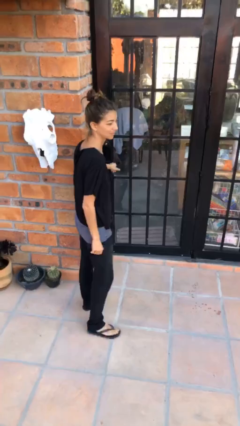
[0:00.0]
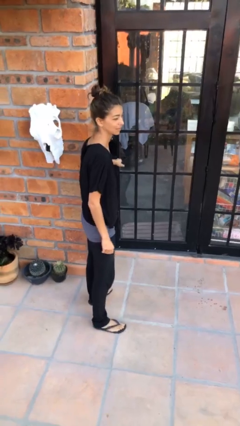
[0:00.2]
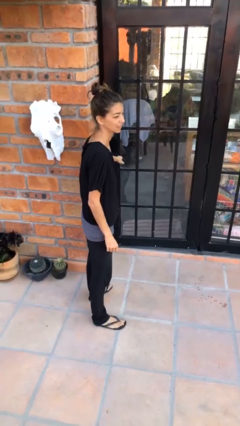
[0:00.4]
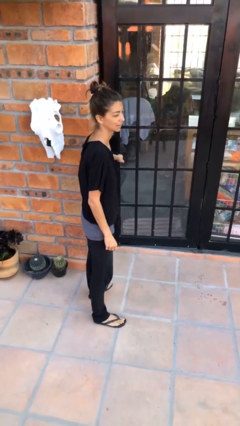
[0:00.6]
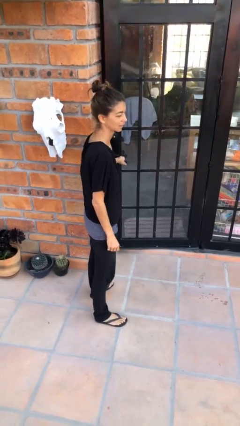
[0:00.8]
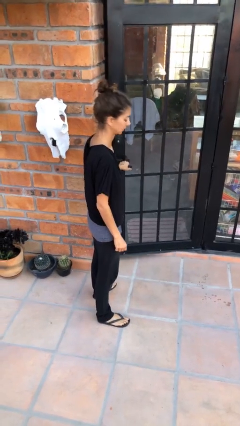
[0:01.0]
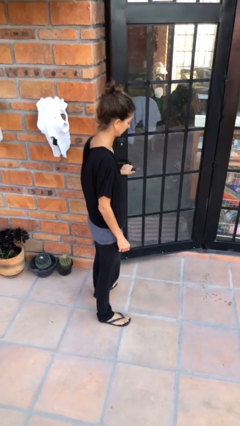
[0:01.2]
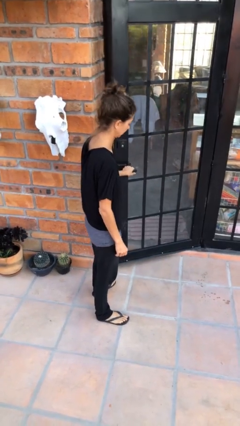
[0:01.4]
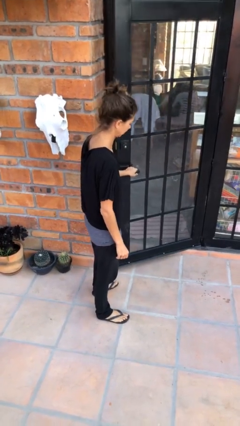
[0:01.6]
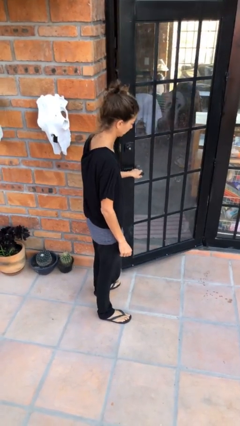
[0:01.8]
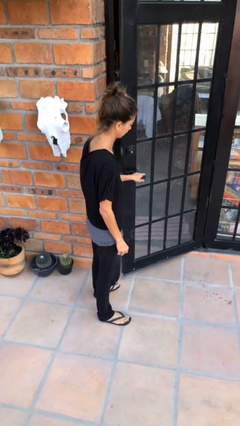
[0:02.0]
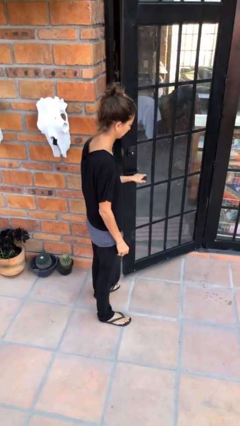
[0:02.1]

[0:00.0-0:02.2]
person opens facility door

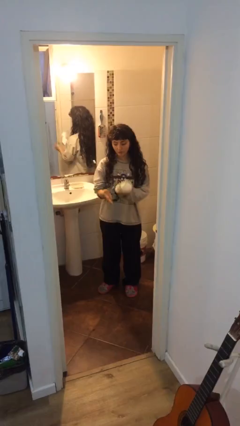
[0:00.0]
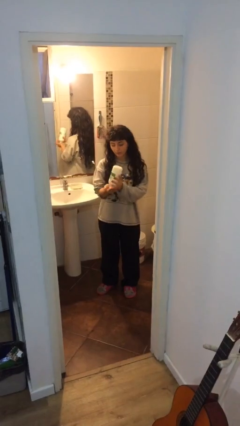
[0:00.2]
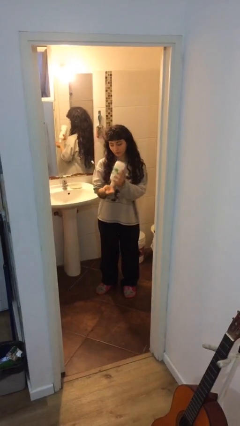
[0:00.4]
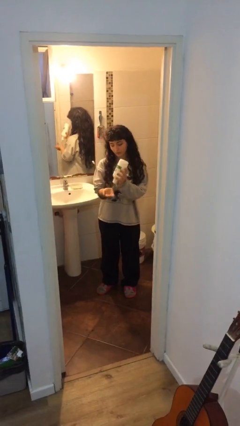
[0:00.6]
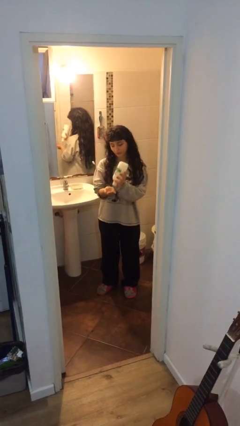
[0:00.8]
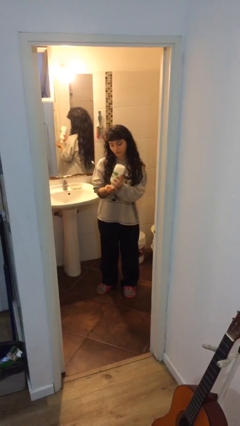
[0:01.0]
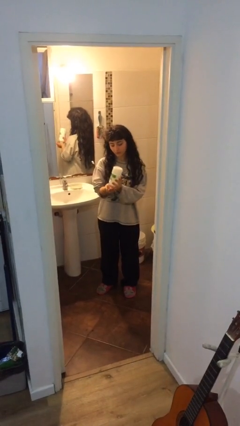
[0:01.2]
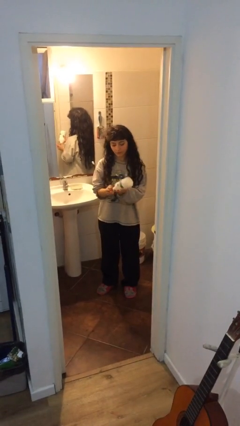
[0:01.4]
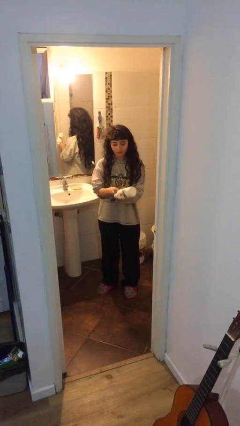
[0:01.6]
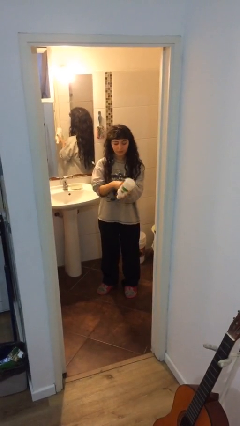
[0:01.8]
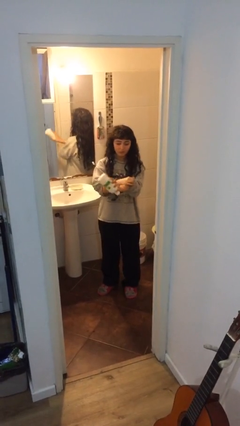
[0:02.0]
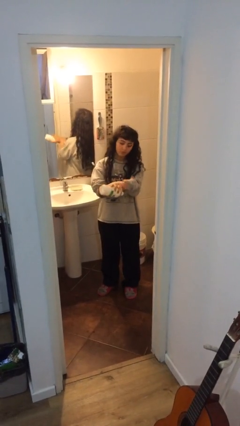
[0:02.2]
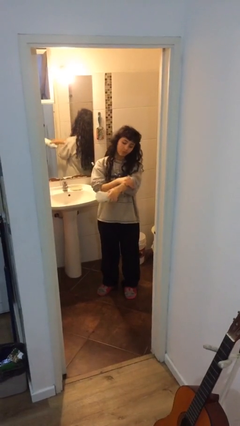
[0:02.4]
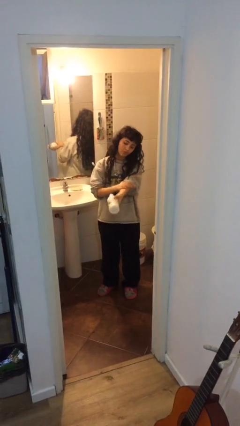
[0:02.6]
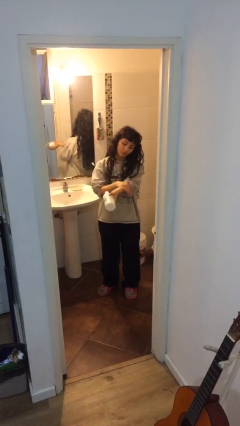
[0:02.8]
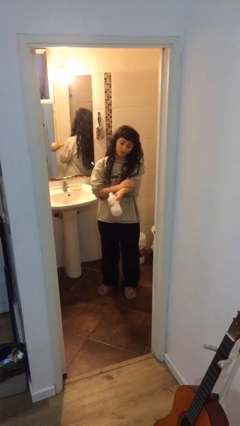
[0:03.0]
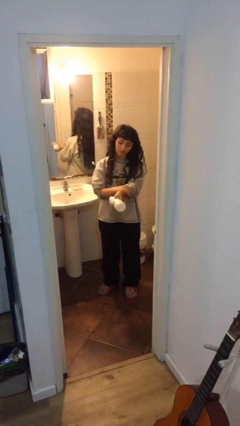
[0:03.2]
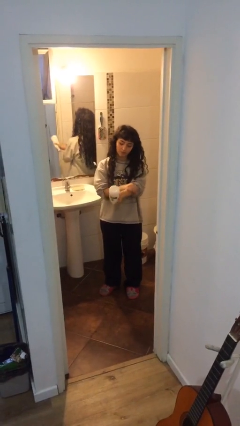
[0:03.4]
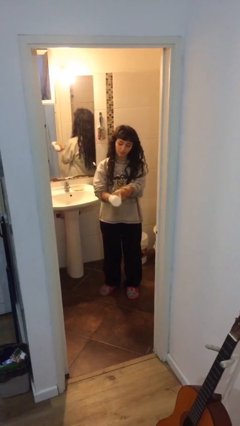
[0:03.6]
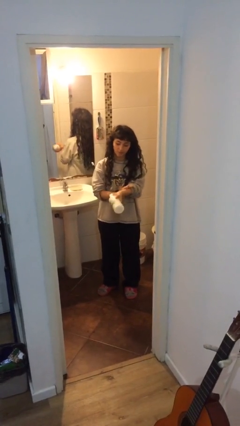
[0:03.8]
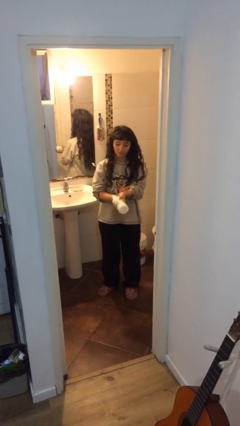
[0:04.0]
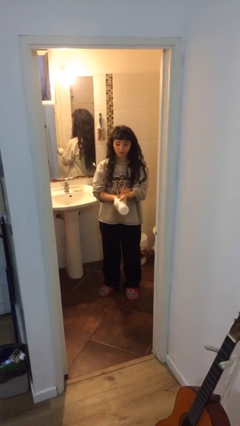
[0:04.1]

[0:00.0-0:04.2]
person applies sunscreen

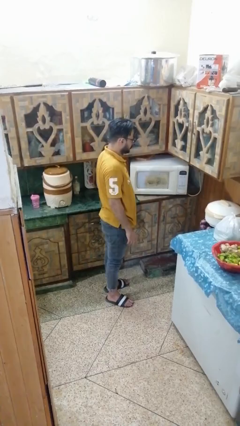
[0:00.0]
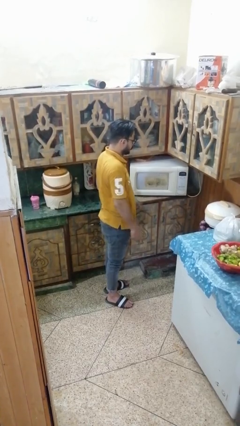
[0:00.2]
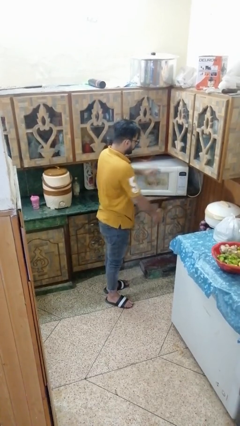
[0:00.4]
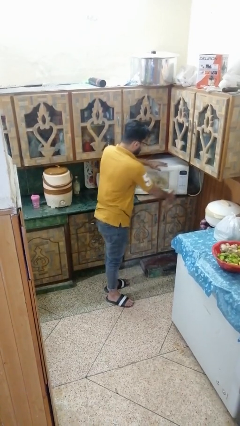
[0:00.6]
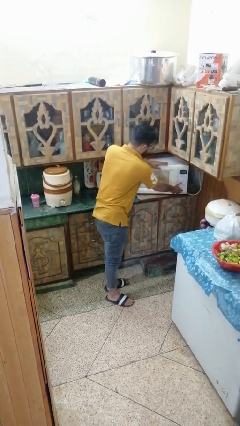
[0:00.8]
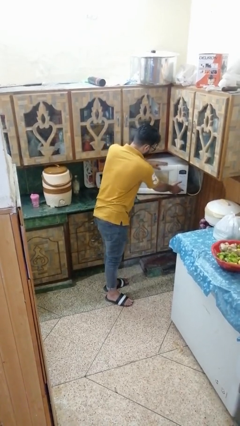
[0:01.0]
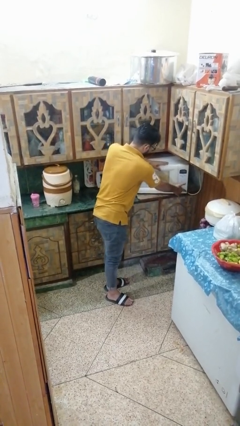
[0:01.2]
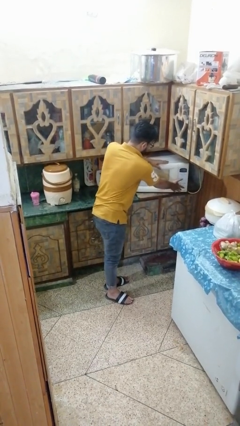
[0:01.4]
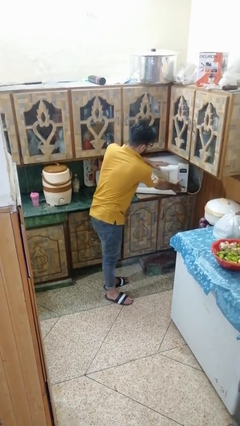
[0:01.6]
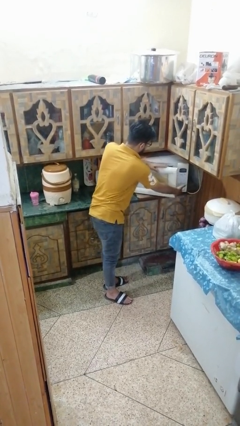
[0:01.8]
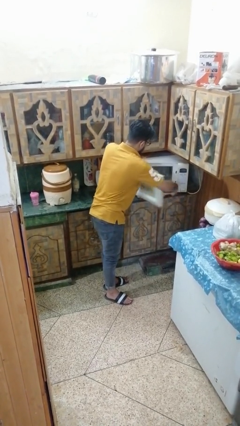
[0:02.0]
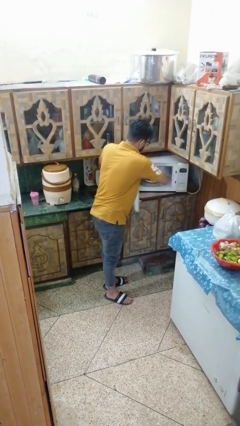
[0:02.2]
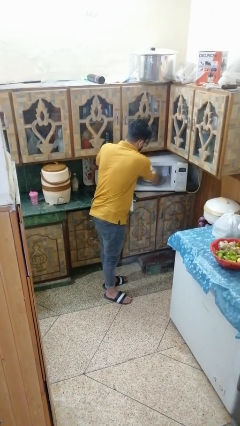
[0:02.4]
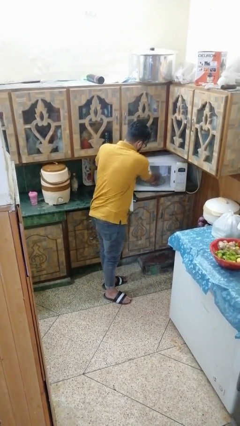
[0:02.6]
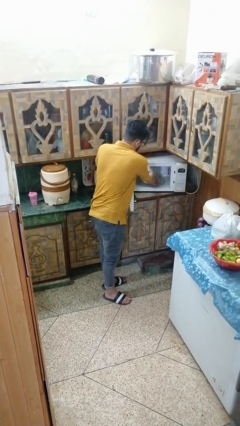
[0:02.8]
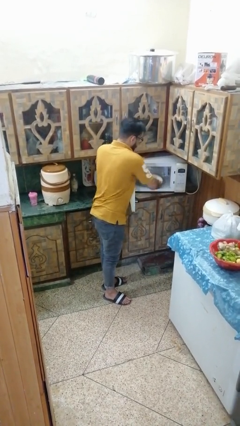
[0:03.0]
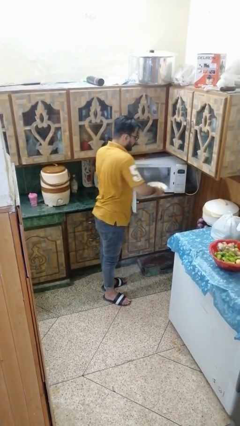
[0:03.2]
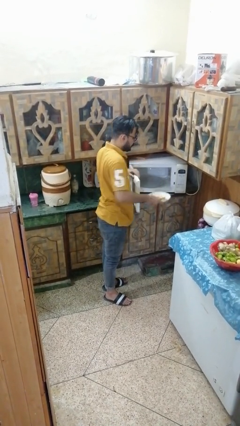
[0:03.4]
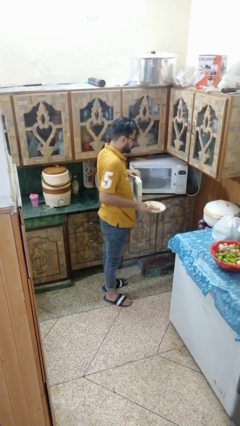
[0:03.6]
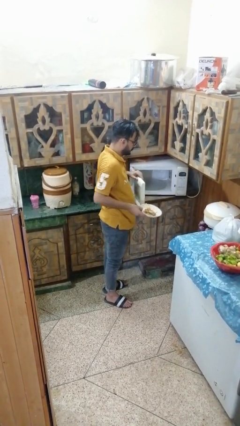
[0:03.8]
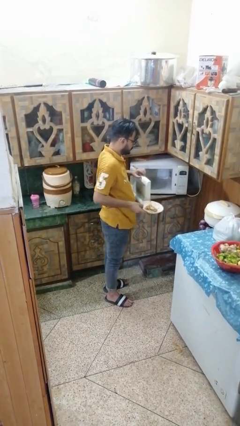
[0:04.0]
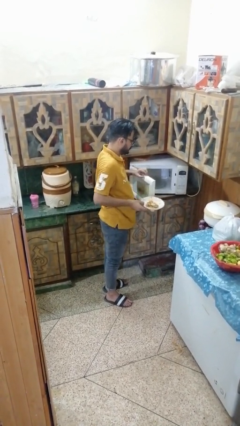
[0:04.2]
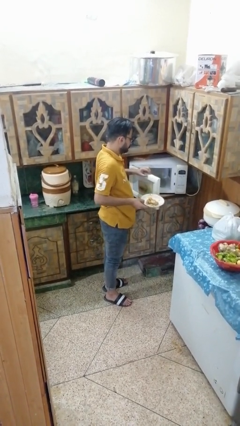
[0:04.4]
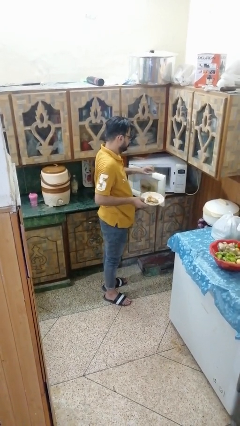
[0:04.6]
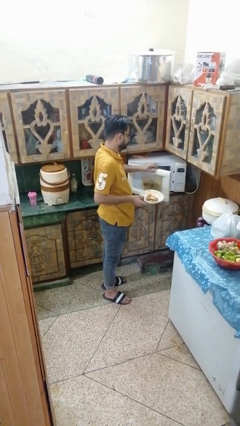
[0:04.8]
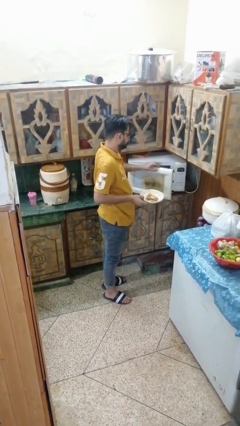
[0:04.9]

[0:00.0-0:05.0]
person takes object from microwave

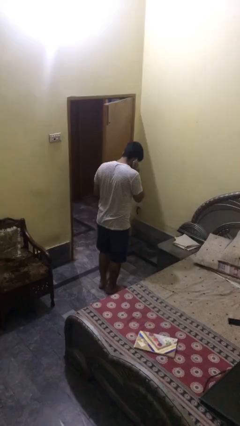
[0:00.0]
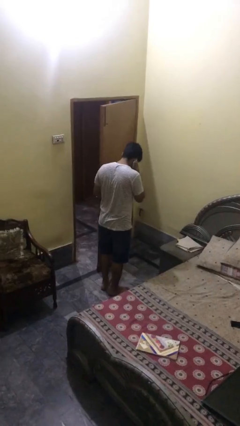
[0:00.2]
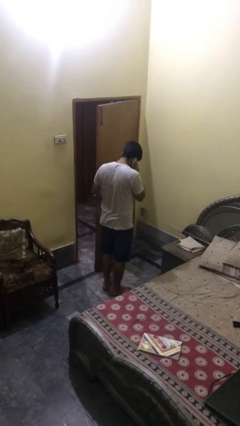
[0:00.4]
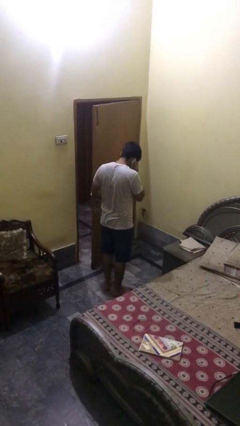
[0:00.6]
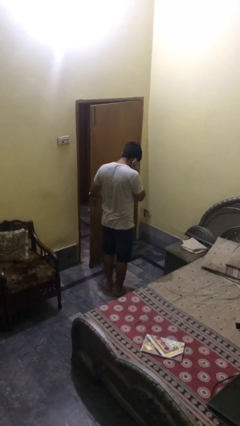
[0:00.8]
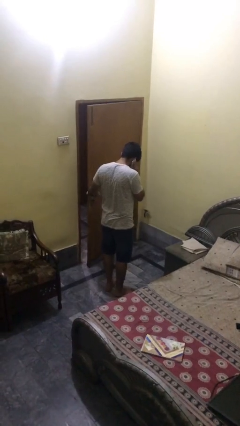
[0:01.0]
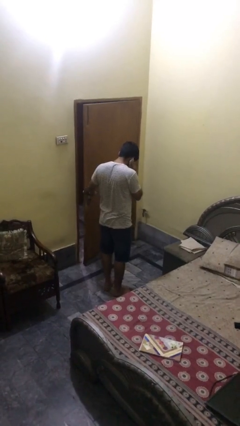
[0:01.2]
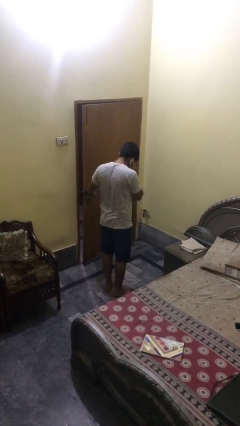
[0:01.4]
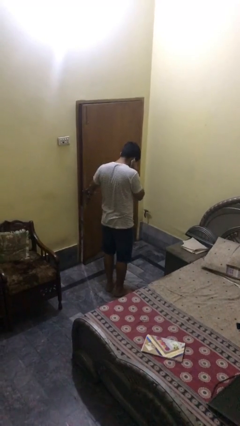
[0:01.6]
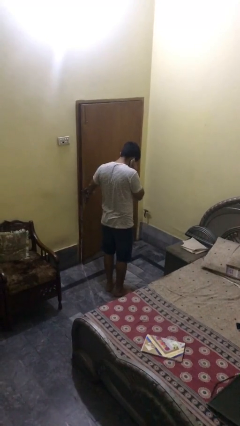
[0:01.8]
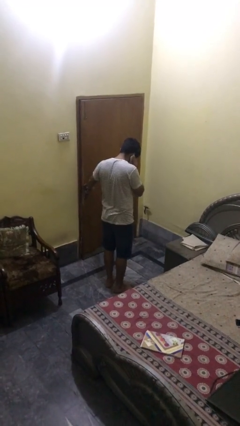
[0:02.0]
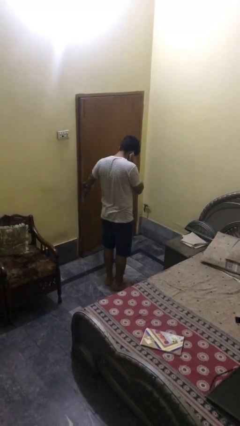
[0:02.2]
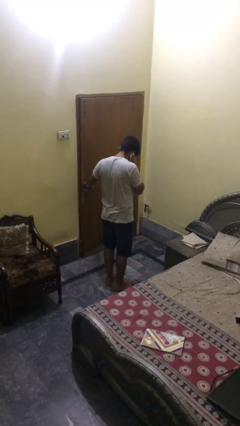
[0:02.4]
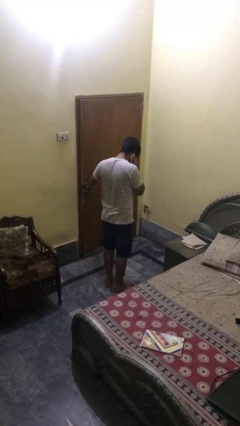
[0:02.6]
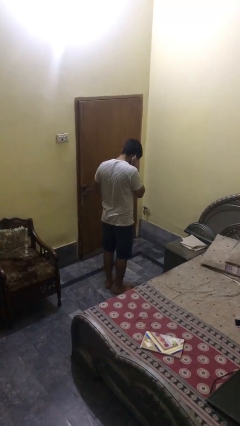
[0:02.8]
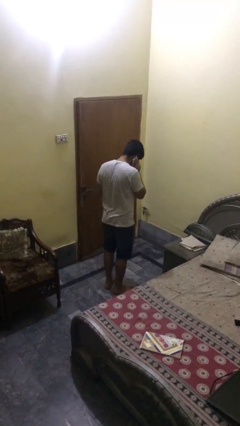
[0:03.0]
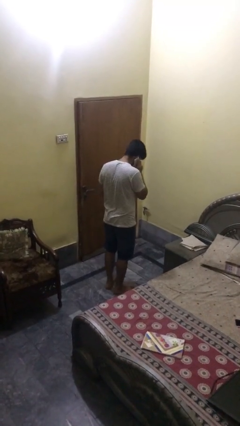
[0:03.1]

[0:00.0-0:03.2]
person closes facility door

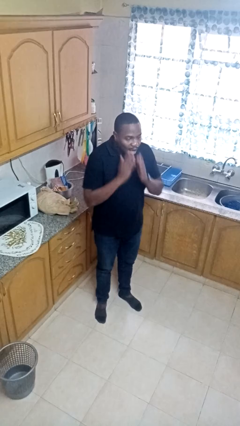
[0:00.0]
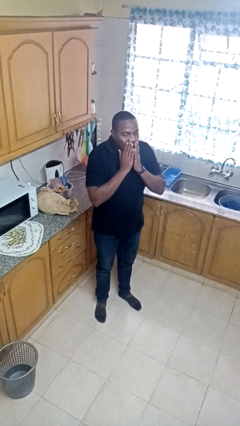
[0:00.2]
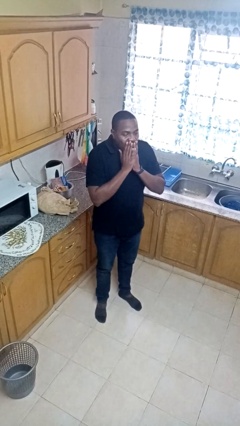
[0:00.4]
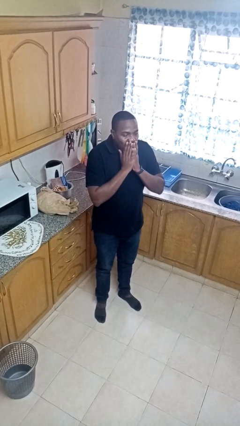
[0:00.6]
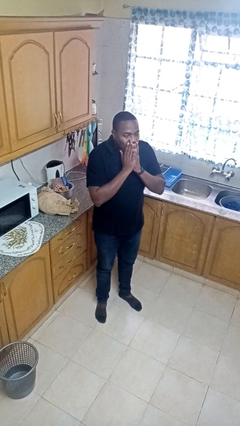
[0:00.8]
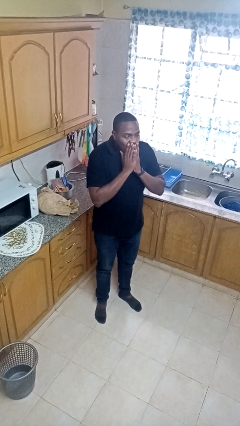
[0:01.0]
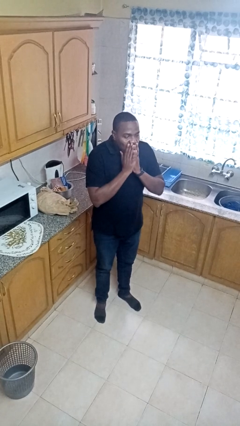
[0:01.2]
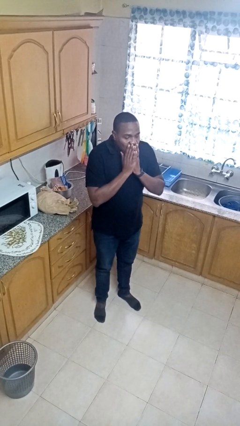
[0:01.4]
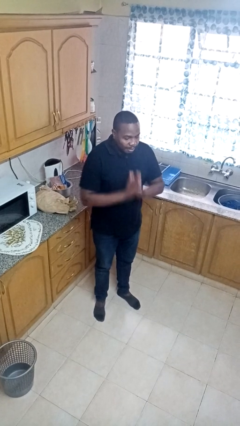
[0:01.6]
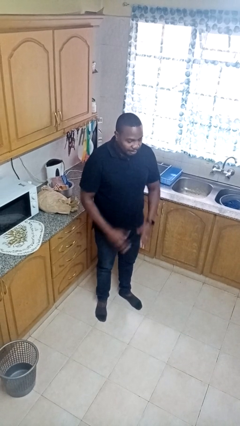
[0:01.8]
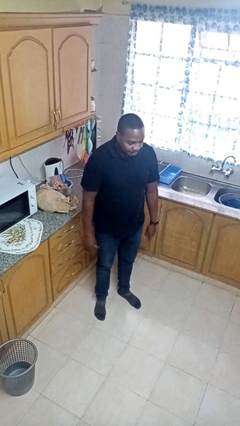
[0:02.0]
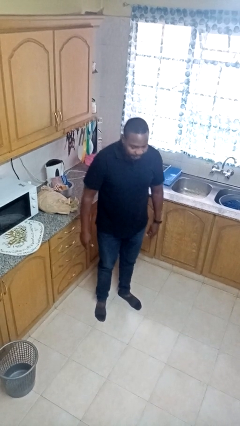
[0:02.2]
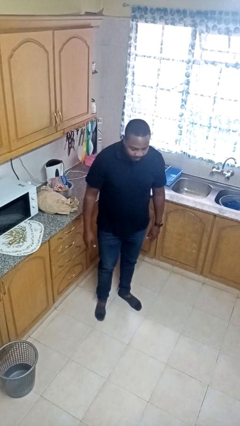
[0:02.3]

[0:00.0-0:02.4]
person yawns

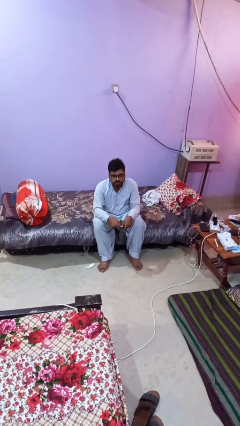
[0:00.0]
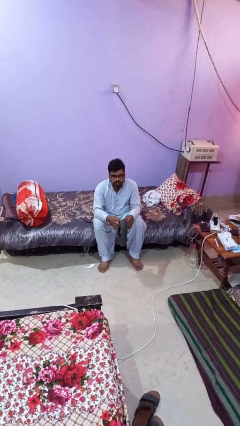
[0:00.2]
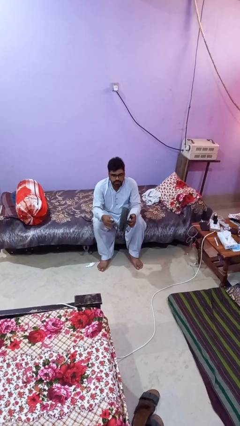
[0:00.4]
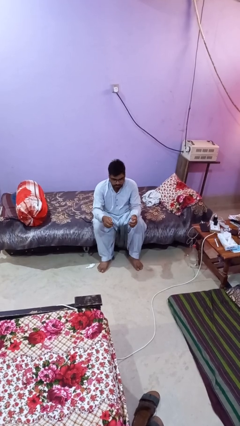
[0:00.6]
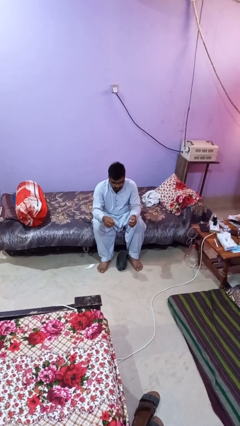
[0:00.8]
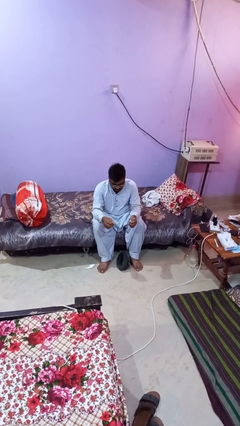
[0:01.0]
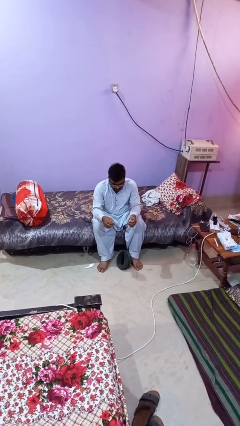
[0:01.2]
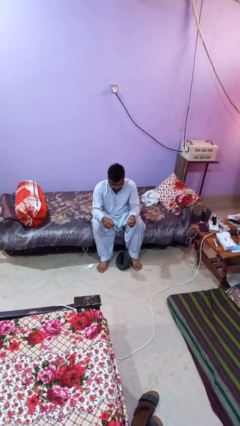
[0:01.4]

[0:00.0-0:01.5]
person drops object
